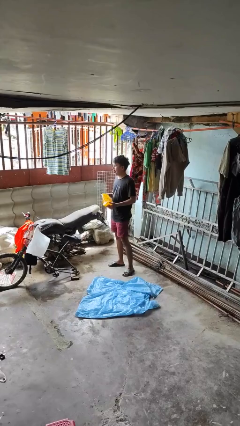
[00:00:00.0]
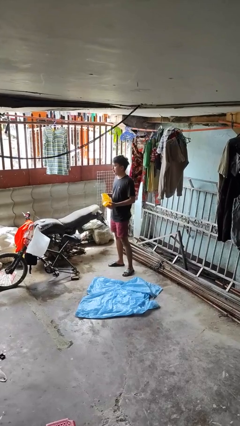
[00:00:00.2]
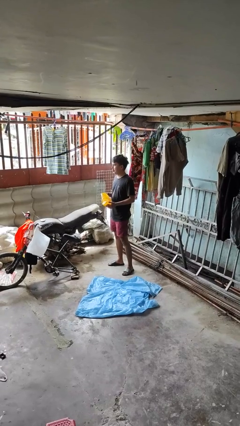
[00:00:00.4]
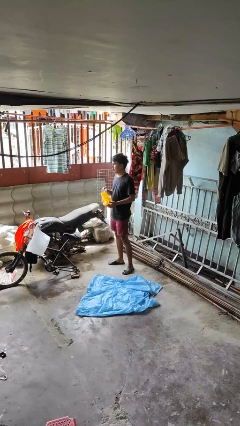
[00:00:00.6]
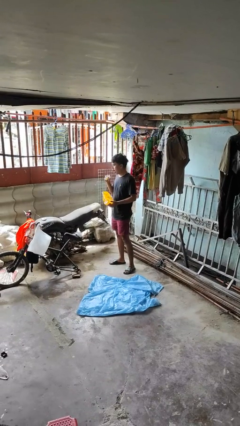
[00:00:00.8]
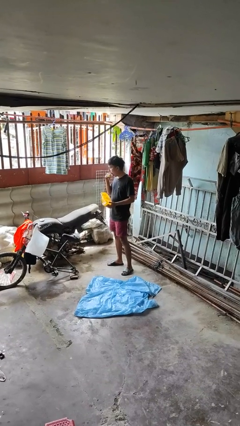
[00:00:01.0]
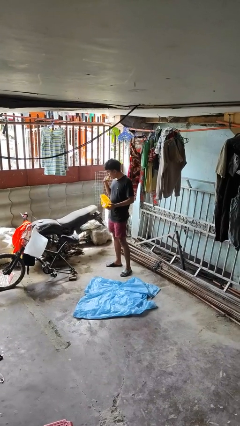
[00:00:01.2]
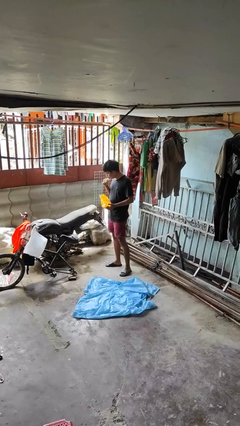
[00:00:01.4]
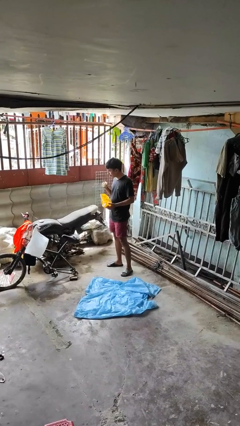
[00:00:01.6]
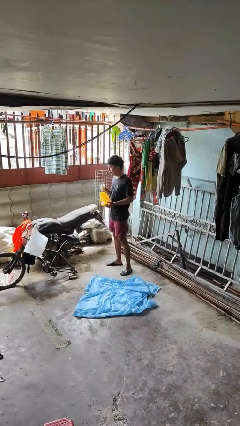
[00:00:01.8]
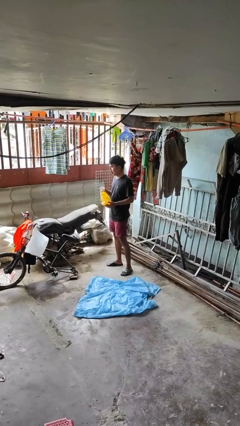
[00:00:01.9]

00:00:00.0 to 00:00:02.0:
person eats snack from bag

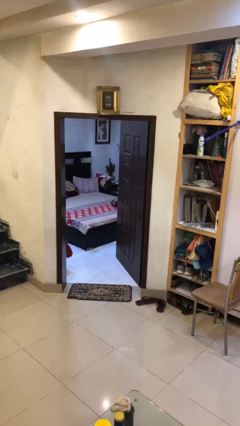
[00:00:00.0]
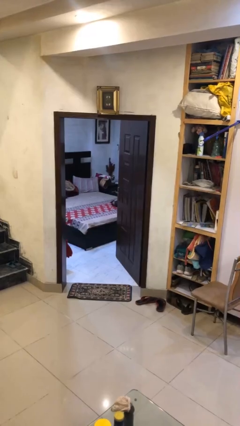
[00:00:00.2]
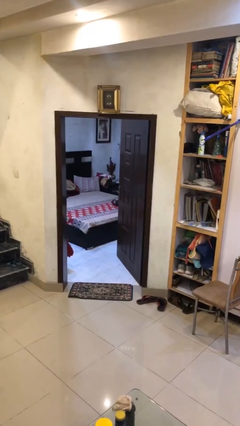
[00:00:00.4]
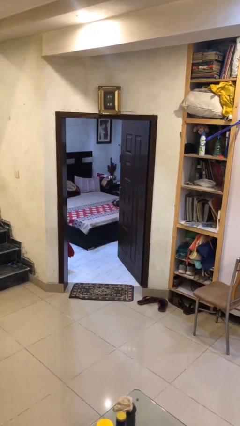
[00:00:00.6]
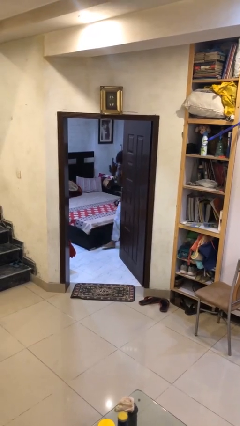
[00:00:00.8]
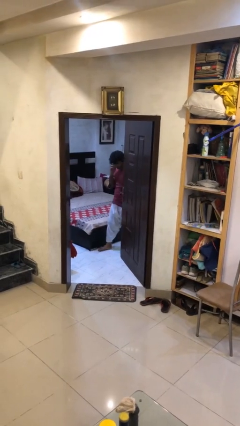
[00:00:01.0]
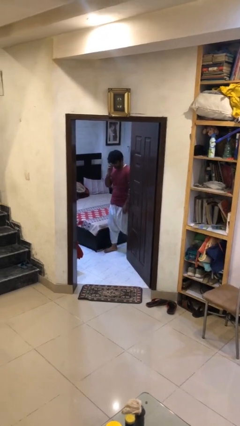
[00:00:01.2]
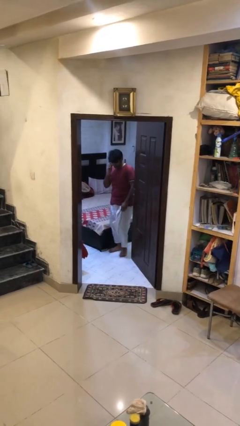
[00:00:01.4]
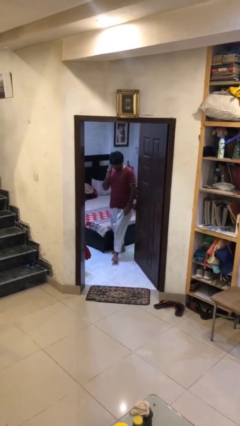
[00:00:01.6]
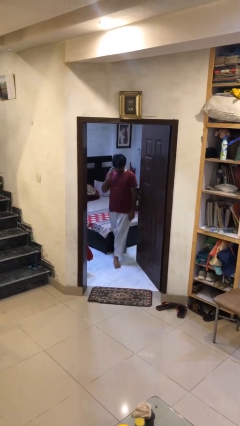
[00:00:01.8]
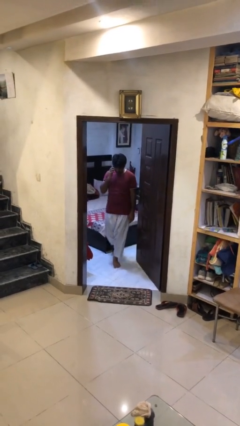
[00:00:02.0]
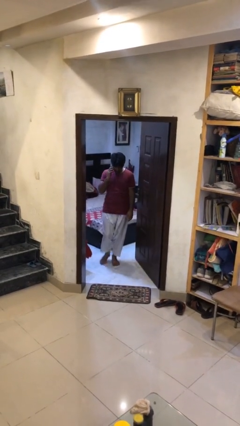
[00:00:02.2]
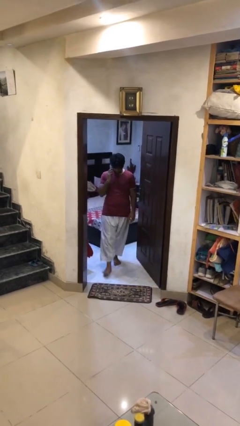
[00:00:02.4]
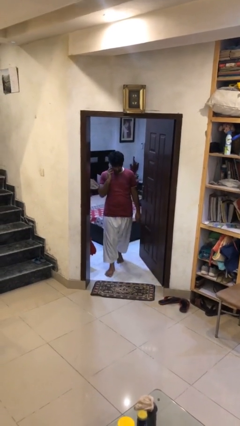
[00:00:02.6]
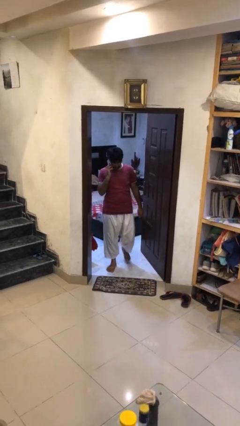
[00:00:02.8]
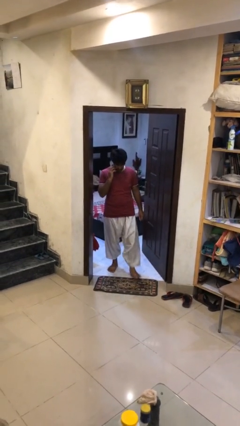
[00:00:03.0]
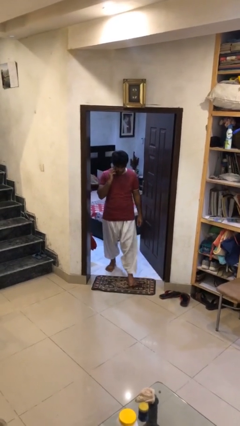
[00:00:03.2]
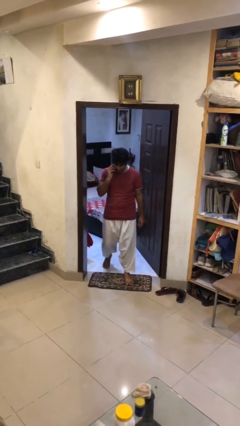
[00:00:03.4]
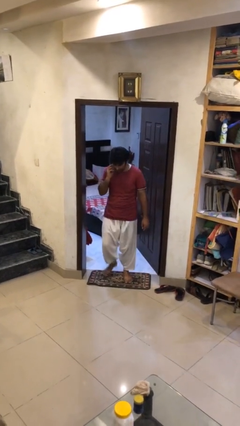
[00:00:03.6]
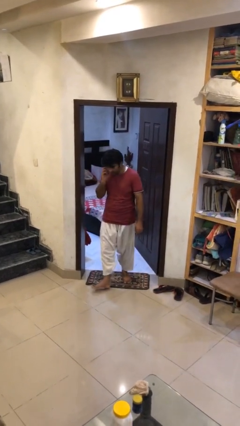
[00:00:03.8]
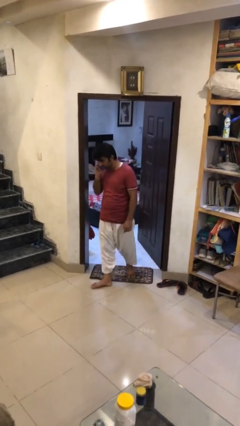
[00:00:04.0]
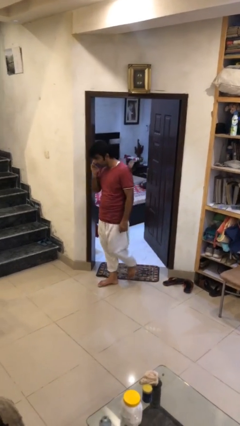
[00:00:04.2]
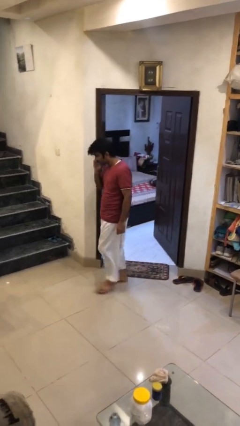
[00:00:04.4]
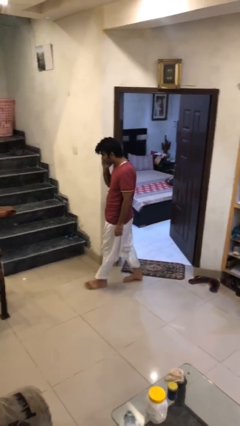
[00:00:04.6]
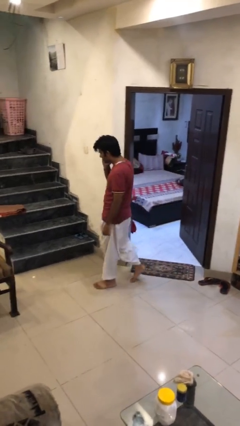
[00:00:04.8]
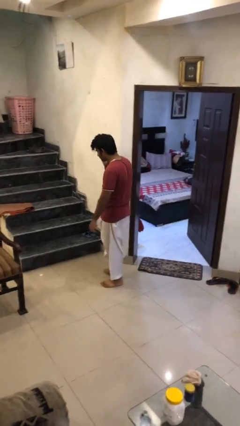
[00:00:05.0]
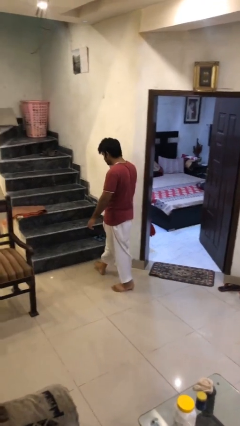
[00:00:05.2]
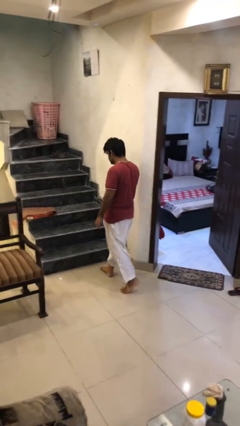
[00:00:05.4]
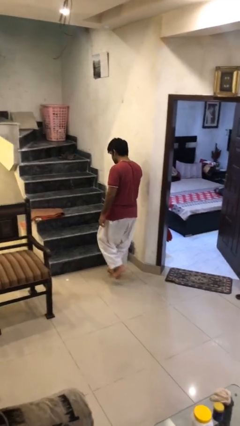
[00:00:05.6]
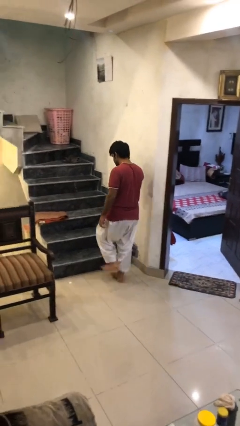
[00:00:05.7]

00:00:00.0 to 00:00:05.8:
person enters scene through structure

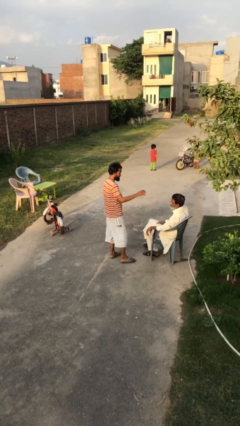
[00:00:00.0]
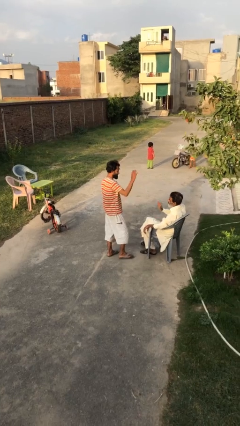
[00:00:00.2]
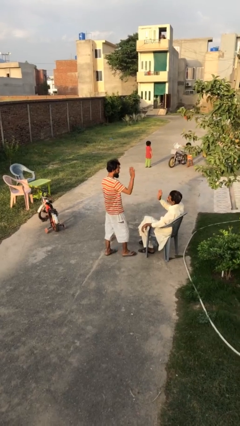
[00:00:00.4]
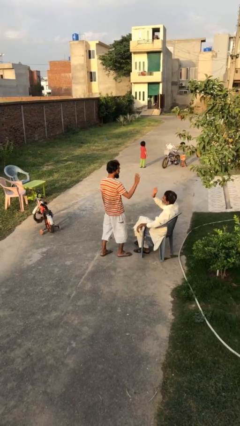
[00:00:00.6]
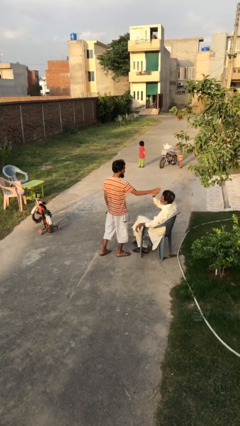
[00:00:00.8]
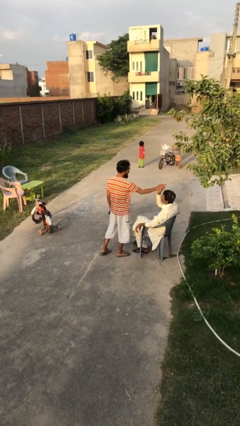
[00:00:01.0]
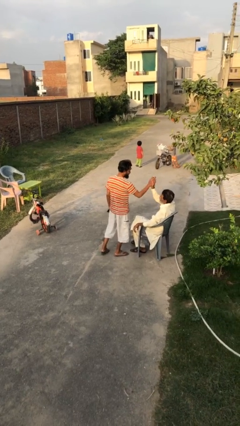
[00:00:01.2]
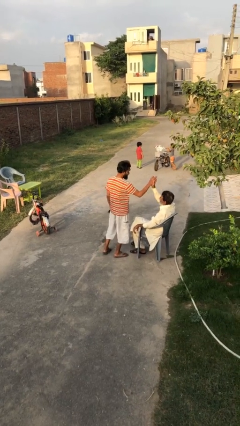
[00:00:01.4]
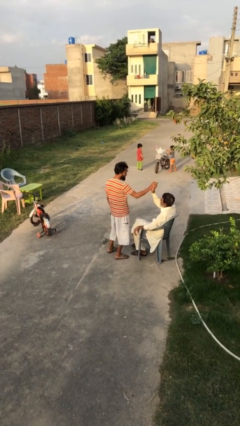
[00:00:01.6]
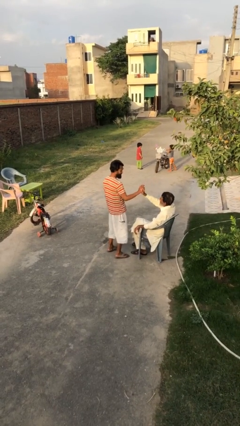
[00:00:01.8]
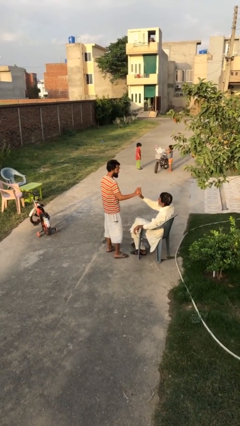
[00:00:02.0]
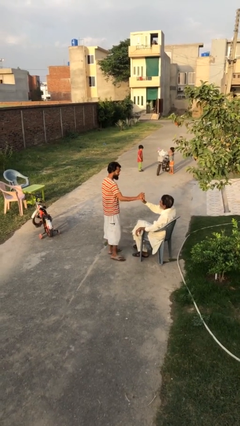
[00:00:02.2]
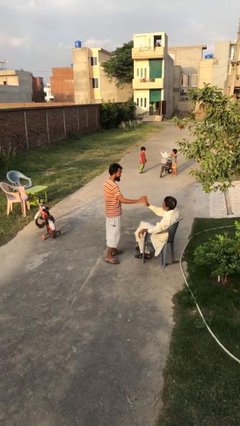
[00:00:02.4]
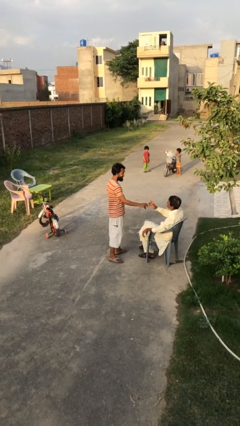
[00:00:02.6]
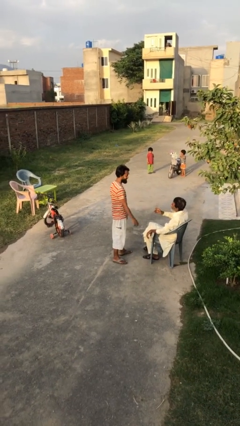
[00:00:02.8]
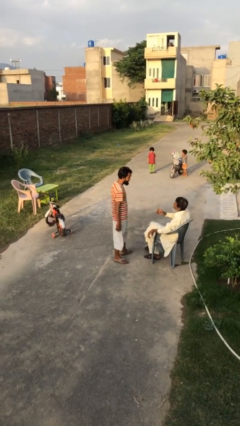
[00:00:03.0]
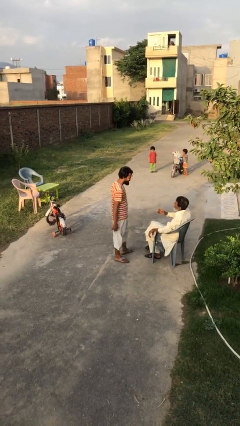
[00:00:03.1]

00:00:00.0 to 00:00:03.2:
person highfives hand

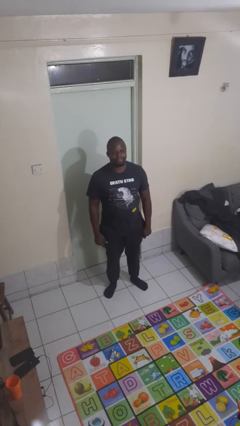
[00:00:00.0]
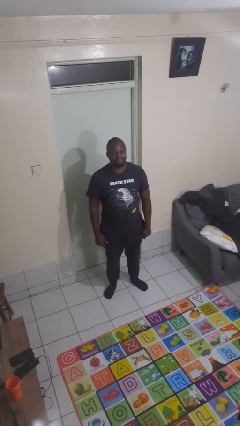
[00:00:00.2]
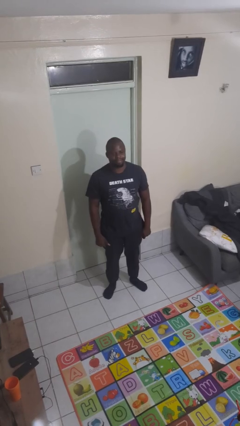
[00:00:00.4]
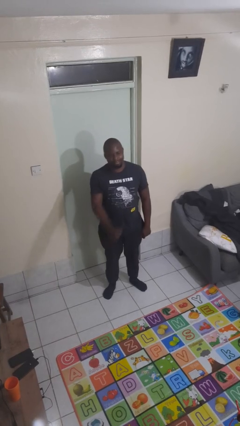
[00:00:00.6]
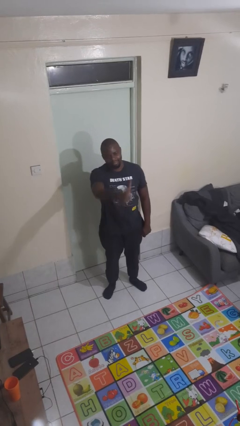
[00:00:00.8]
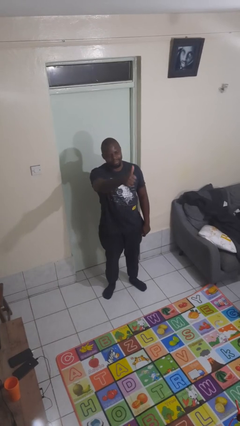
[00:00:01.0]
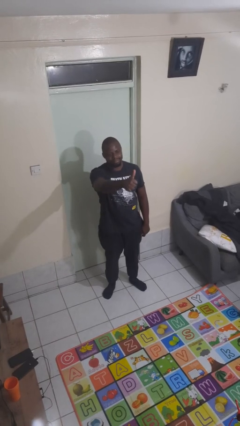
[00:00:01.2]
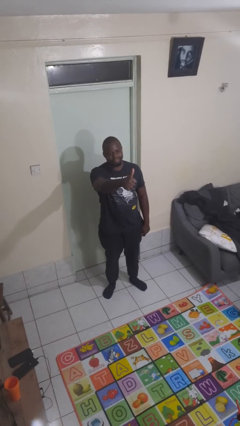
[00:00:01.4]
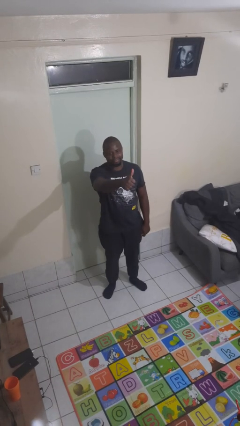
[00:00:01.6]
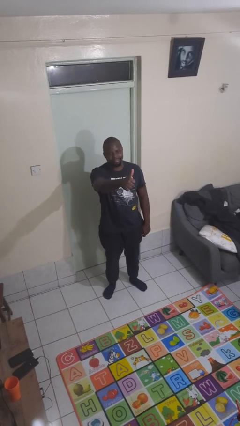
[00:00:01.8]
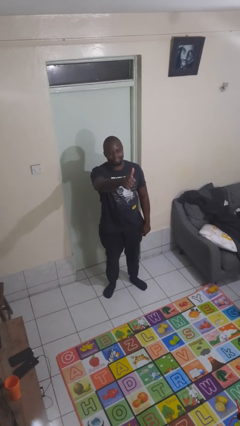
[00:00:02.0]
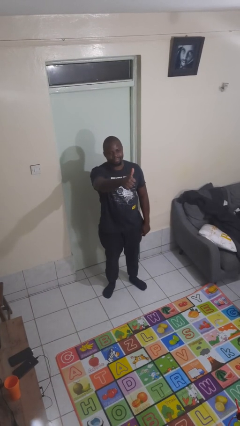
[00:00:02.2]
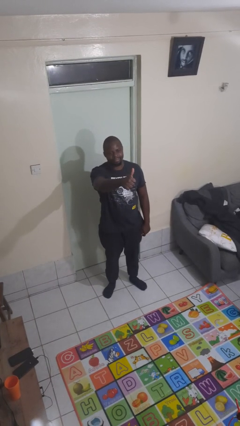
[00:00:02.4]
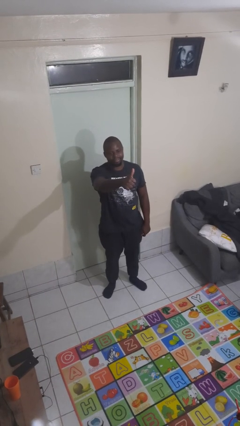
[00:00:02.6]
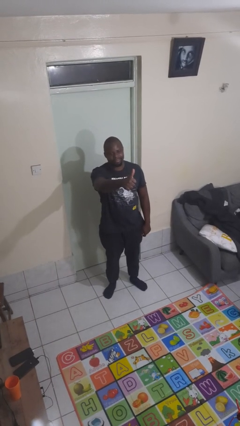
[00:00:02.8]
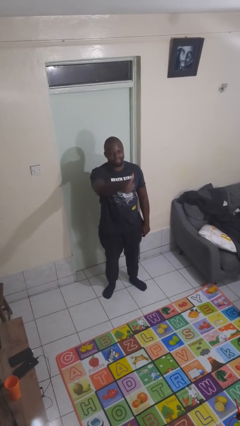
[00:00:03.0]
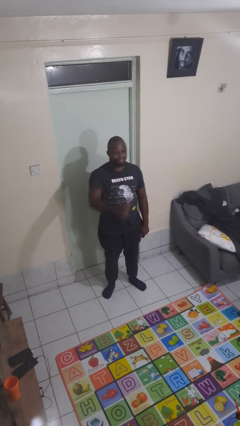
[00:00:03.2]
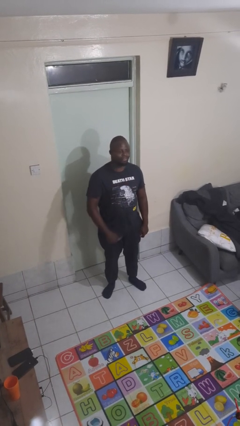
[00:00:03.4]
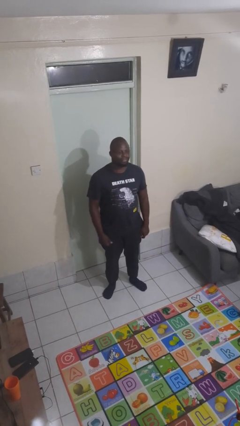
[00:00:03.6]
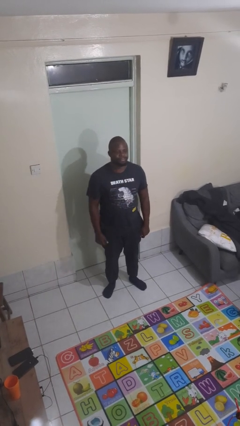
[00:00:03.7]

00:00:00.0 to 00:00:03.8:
person gestures thumbs up

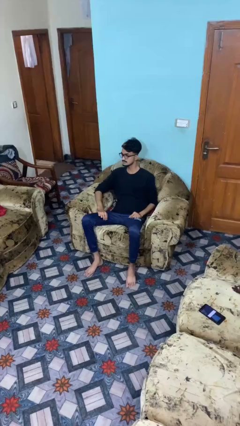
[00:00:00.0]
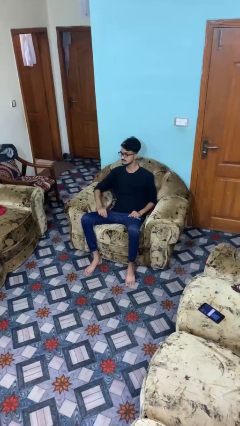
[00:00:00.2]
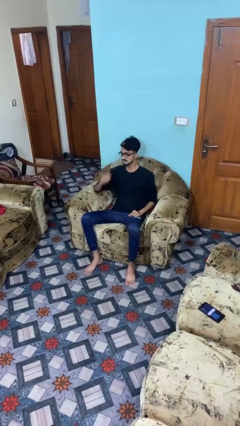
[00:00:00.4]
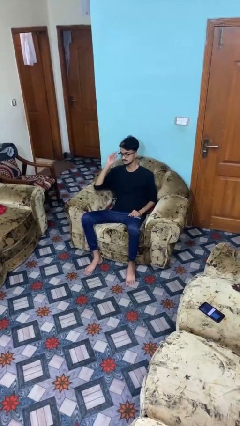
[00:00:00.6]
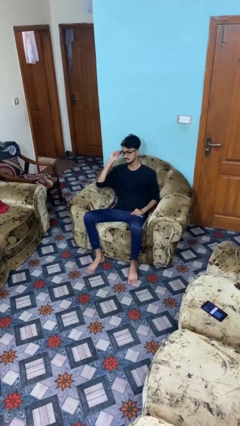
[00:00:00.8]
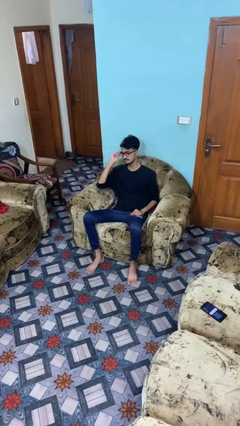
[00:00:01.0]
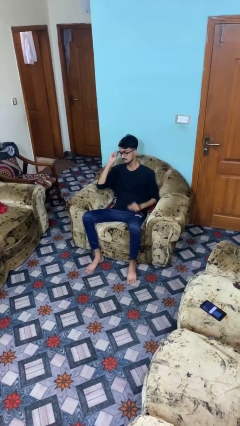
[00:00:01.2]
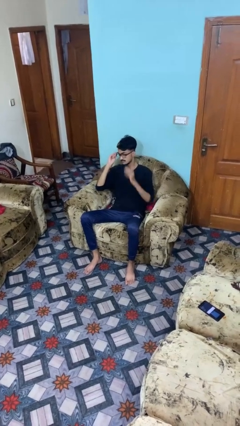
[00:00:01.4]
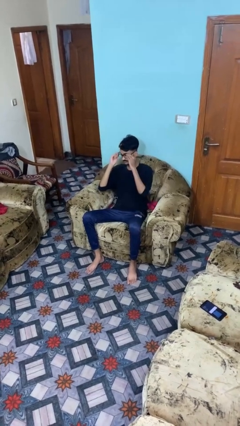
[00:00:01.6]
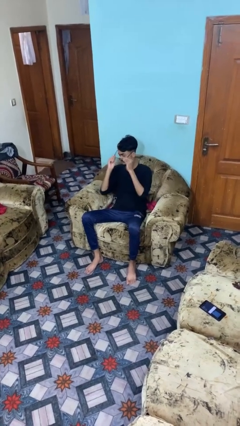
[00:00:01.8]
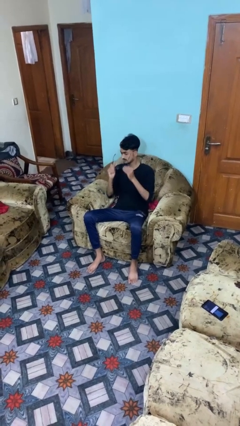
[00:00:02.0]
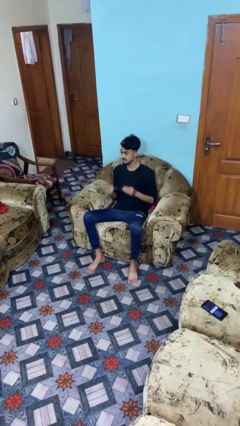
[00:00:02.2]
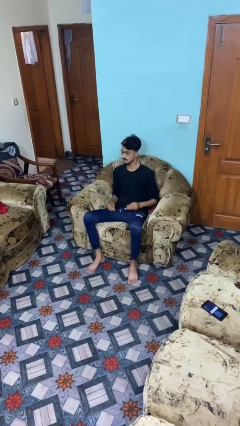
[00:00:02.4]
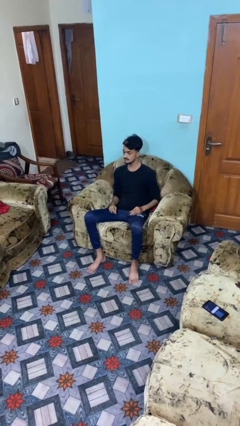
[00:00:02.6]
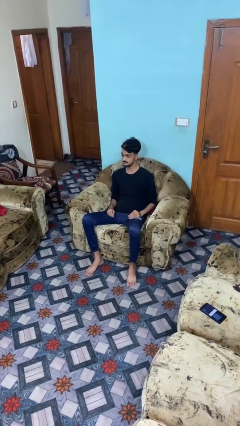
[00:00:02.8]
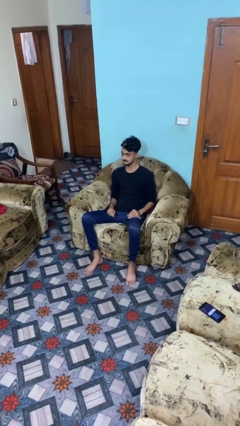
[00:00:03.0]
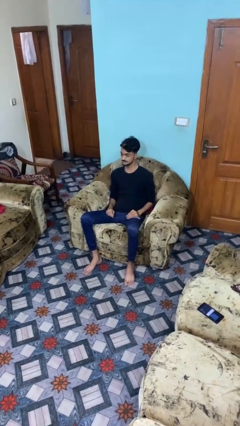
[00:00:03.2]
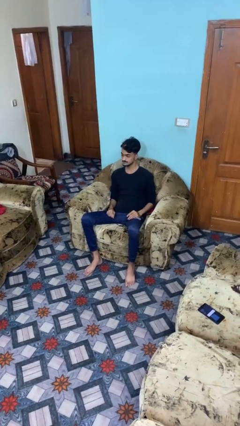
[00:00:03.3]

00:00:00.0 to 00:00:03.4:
person takes off glasses
